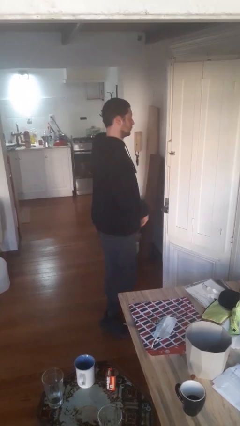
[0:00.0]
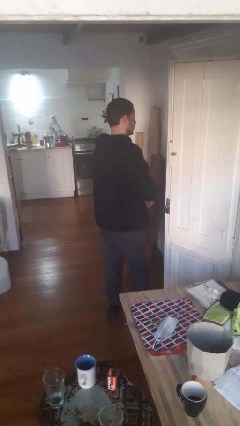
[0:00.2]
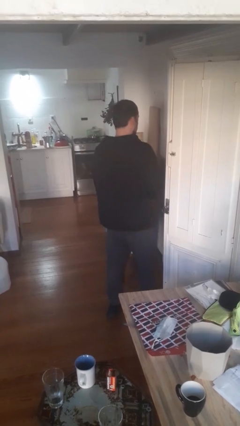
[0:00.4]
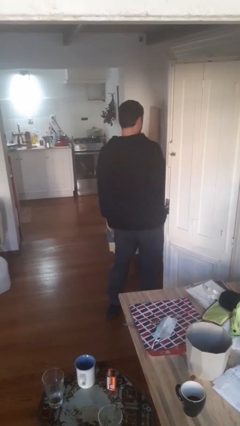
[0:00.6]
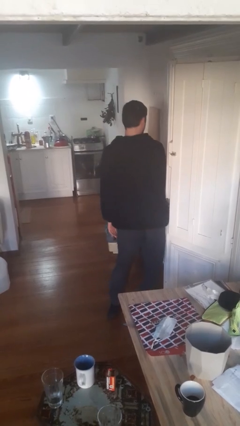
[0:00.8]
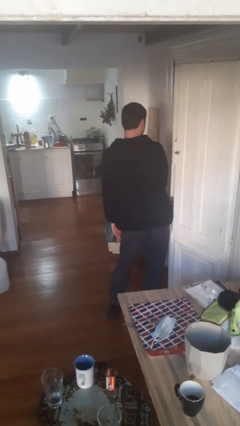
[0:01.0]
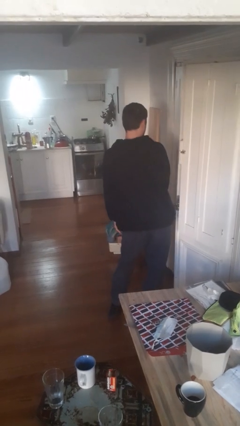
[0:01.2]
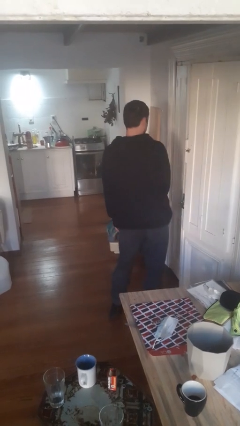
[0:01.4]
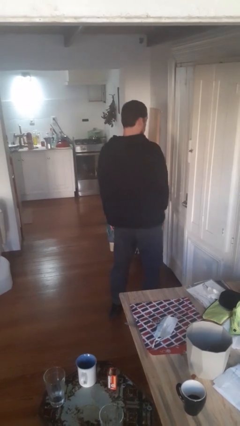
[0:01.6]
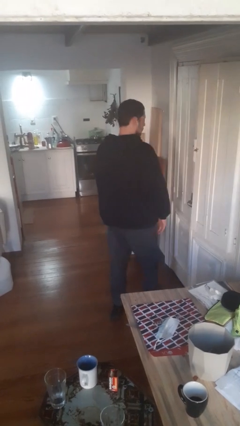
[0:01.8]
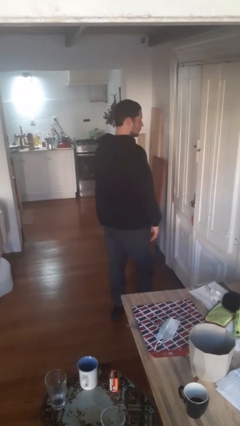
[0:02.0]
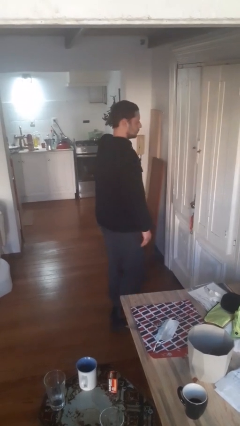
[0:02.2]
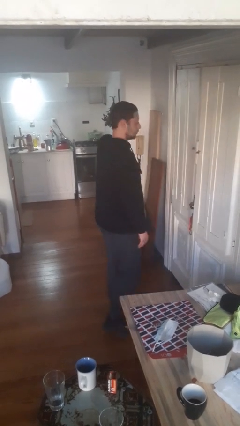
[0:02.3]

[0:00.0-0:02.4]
person closes door with hip

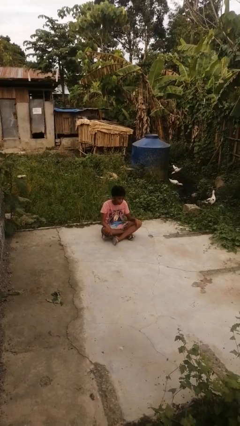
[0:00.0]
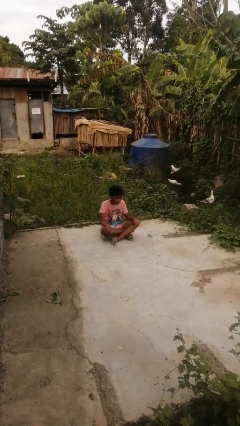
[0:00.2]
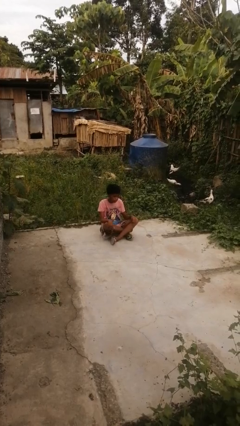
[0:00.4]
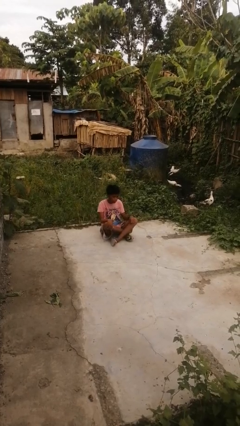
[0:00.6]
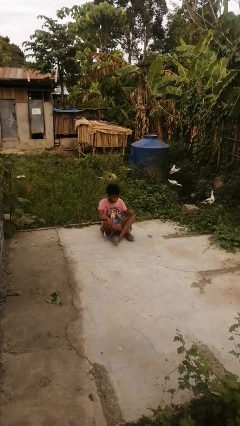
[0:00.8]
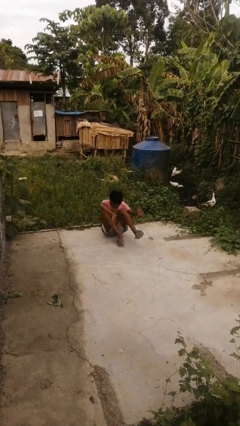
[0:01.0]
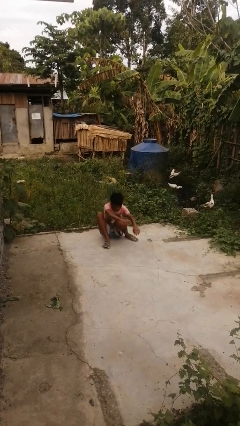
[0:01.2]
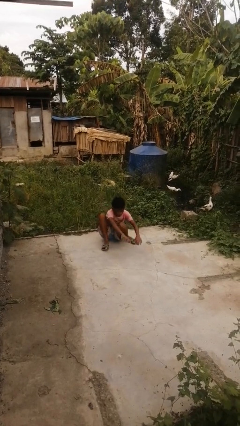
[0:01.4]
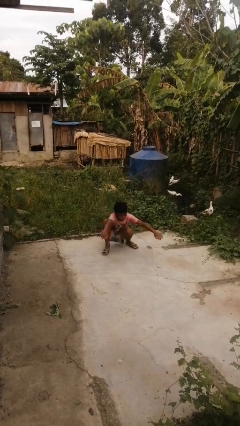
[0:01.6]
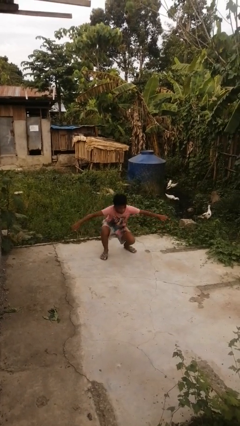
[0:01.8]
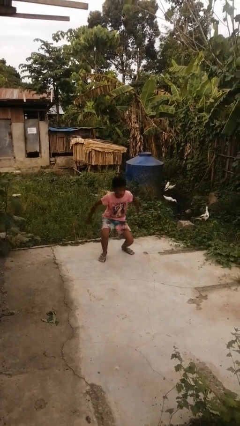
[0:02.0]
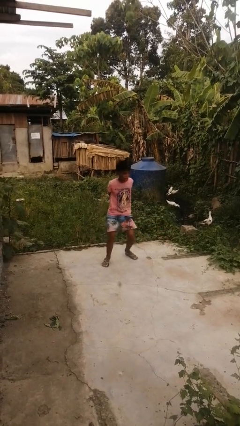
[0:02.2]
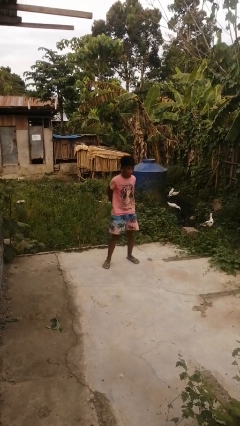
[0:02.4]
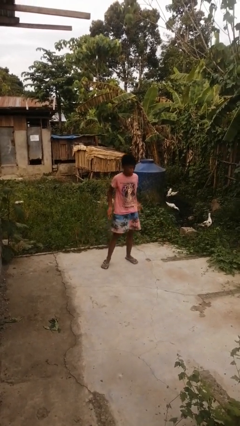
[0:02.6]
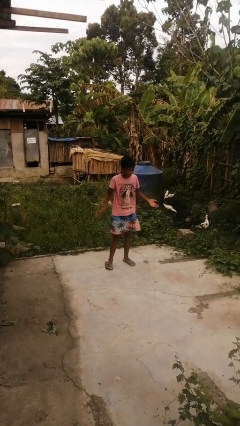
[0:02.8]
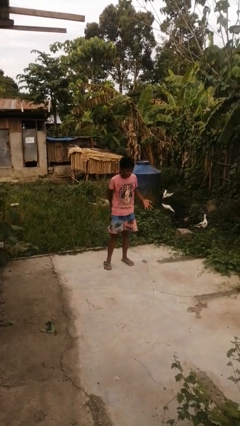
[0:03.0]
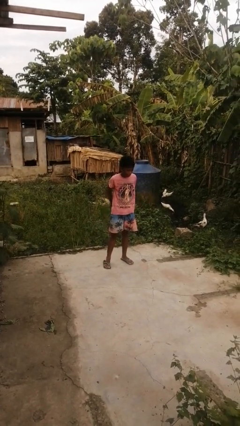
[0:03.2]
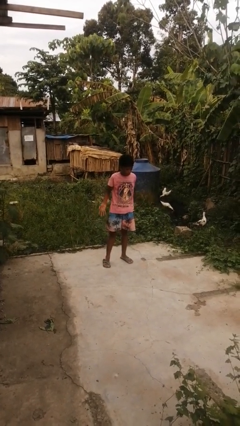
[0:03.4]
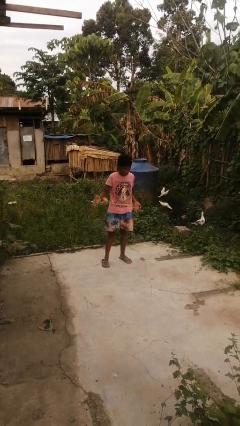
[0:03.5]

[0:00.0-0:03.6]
person stands up from floor

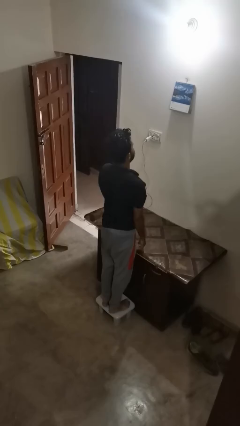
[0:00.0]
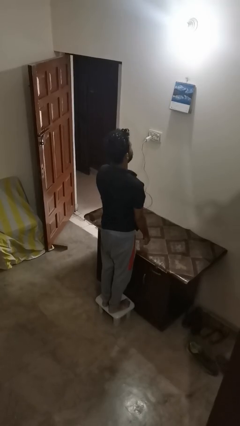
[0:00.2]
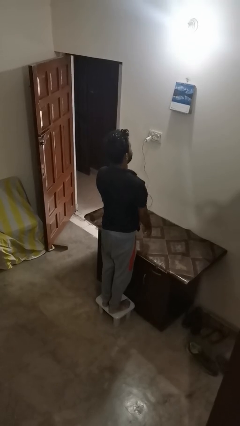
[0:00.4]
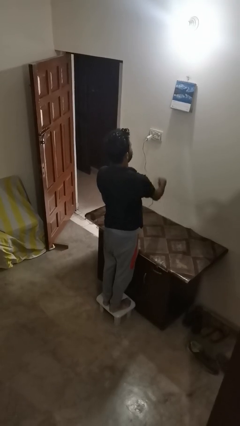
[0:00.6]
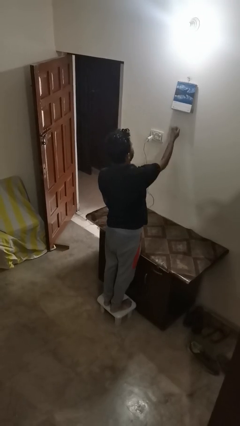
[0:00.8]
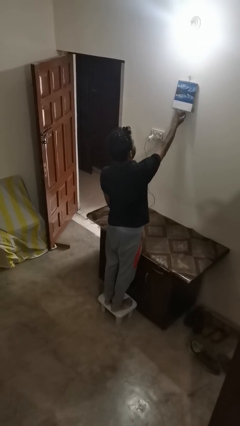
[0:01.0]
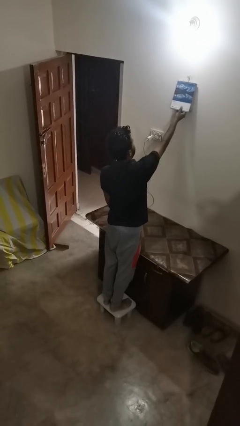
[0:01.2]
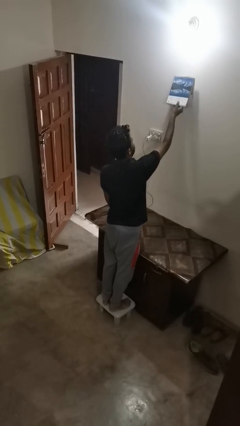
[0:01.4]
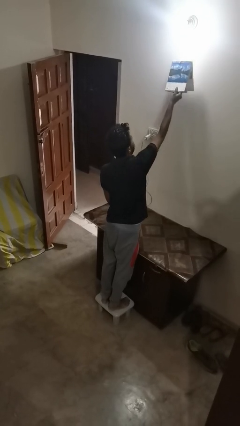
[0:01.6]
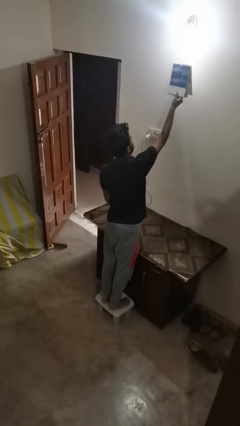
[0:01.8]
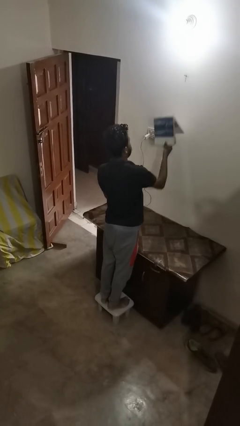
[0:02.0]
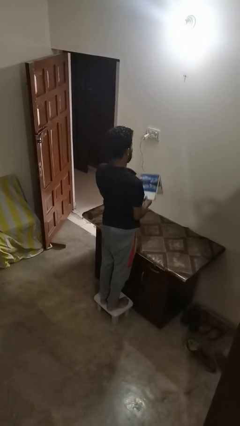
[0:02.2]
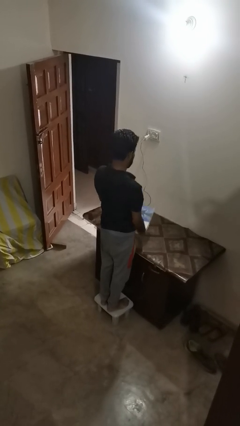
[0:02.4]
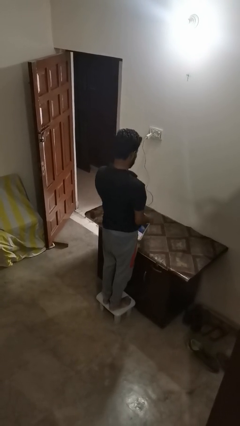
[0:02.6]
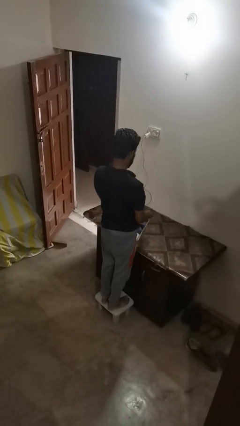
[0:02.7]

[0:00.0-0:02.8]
person takes down picture frame

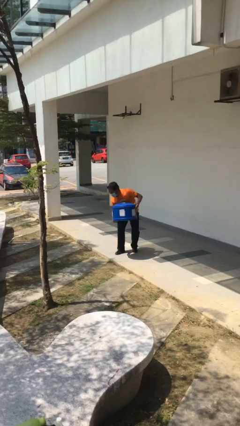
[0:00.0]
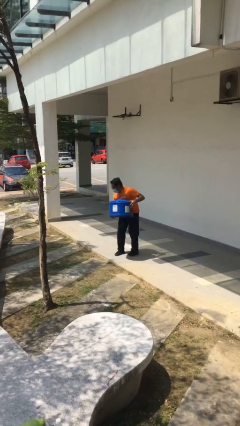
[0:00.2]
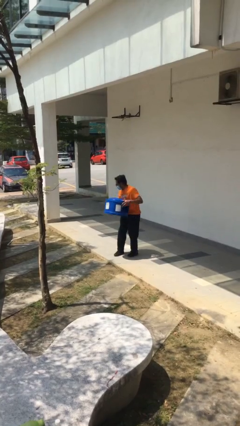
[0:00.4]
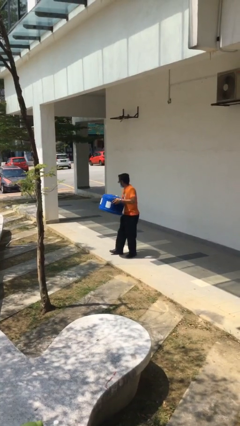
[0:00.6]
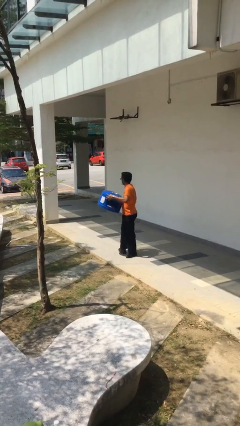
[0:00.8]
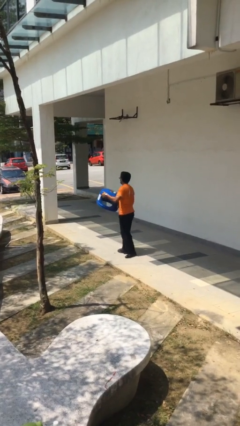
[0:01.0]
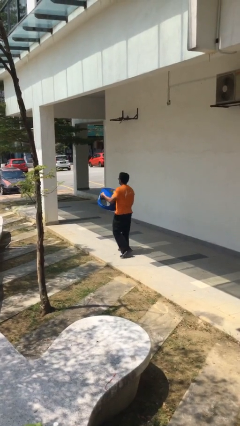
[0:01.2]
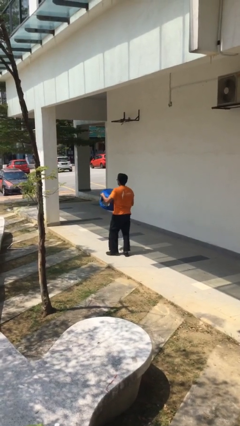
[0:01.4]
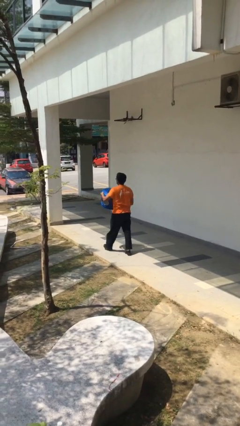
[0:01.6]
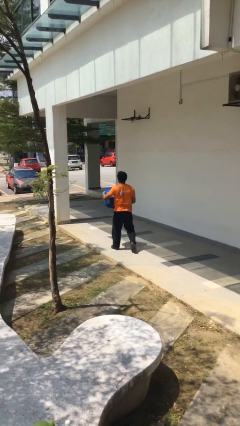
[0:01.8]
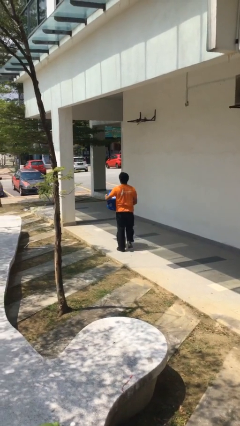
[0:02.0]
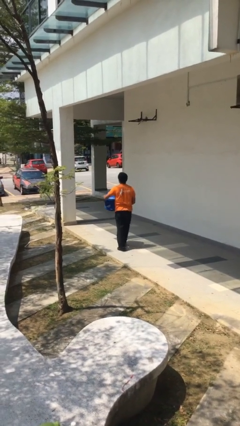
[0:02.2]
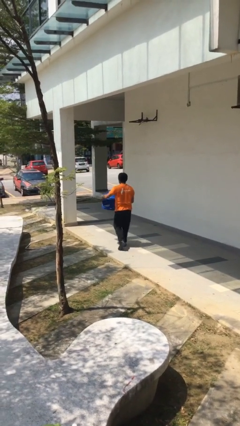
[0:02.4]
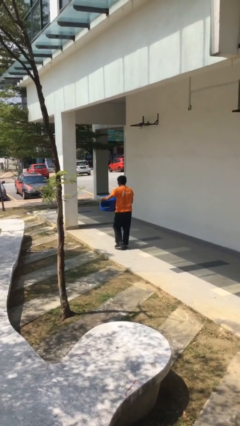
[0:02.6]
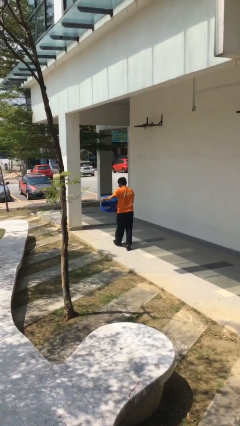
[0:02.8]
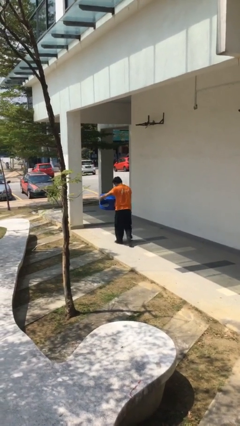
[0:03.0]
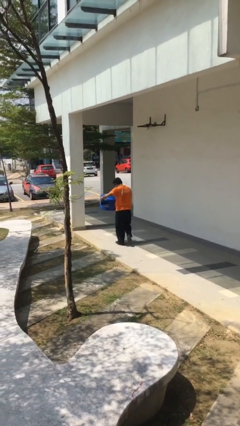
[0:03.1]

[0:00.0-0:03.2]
person carries heavy object

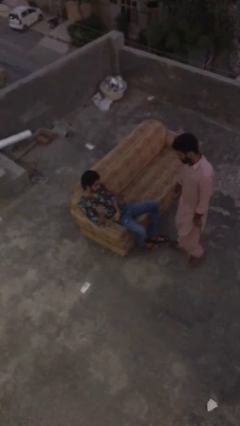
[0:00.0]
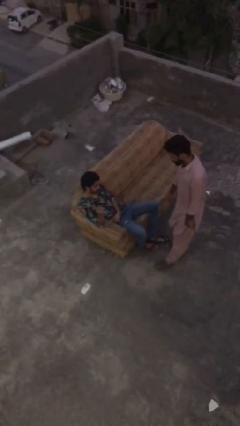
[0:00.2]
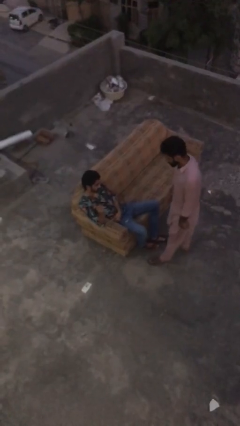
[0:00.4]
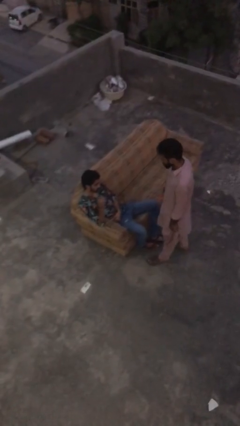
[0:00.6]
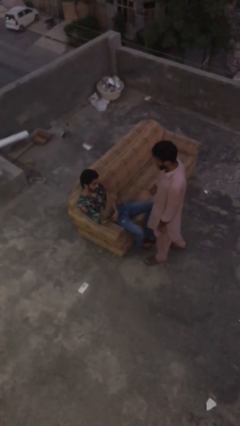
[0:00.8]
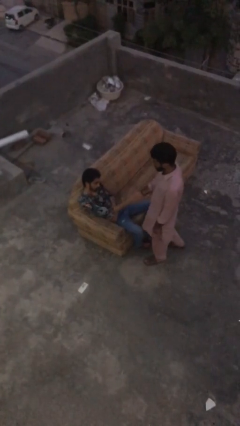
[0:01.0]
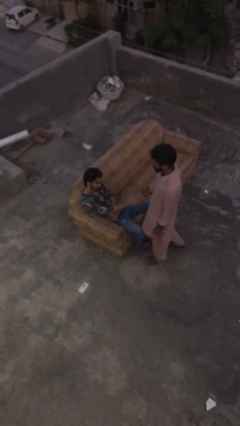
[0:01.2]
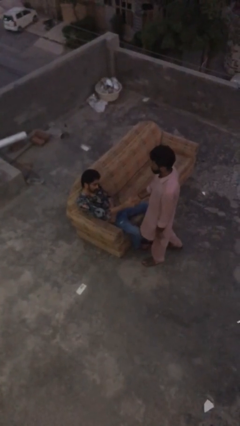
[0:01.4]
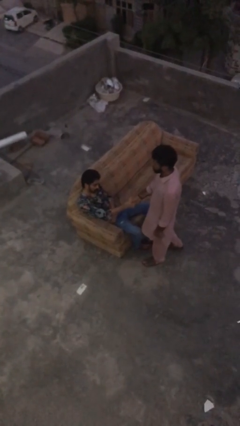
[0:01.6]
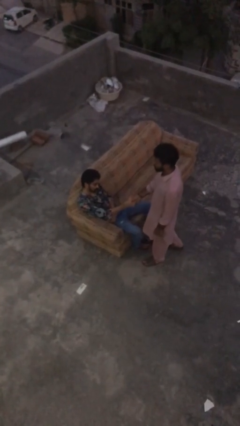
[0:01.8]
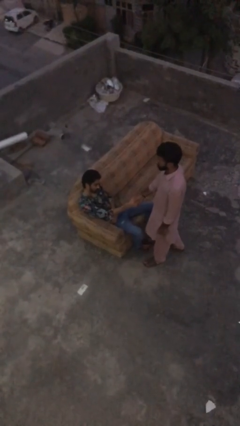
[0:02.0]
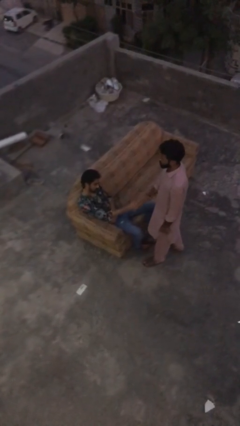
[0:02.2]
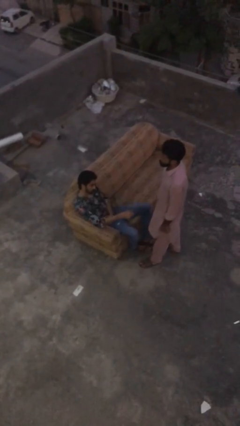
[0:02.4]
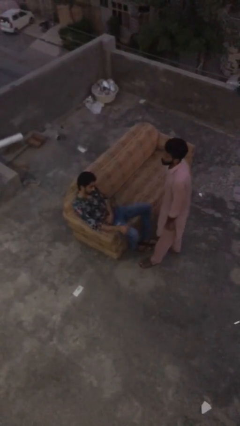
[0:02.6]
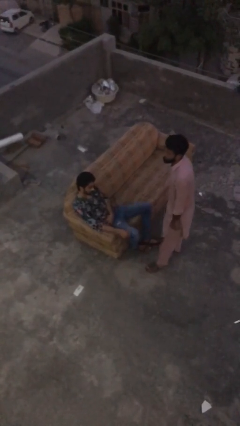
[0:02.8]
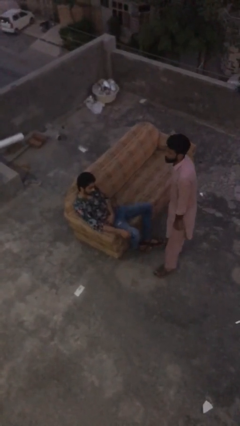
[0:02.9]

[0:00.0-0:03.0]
person shakes hand

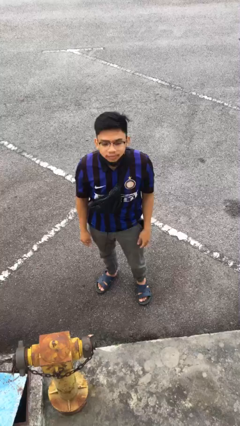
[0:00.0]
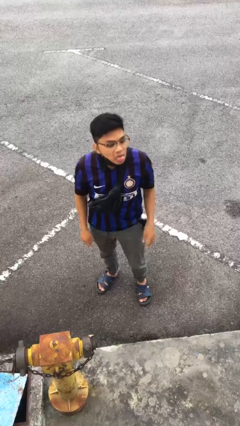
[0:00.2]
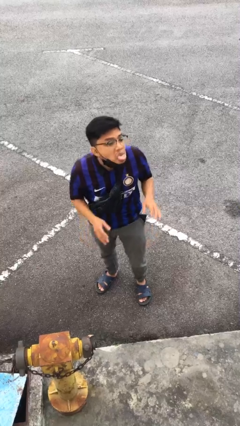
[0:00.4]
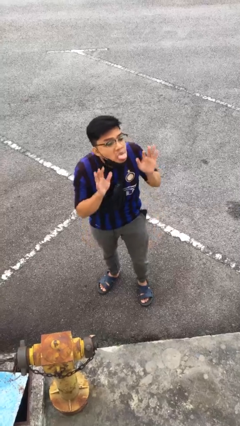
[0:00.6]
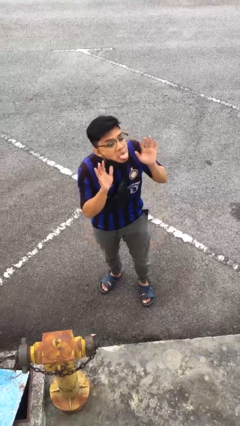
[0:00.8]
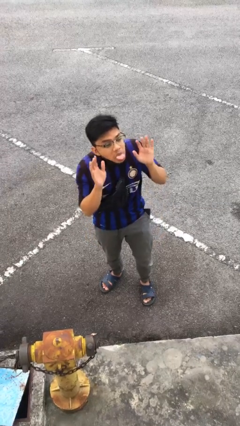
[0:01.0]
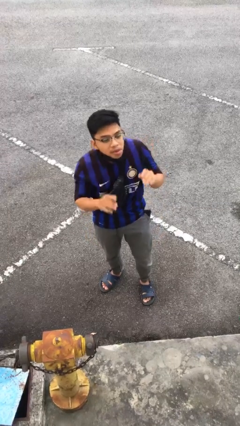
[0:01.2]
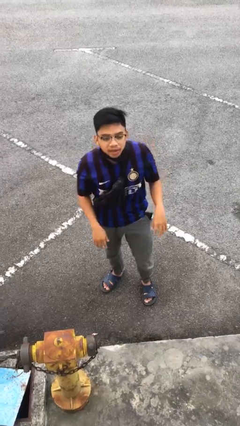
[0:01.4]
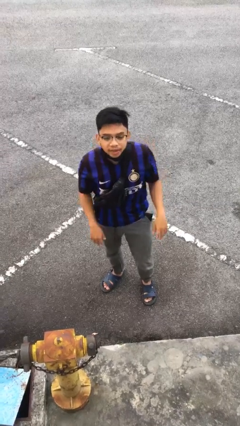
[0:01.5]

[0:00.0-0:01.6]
person sticks out tongue

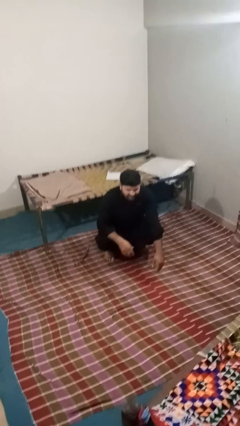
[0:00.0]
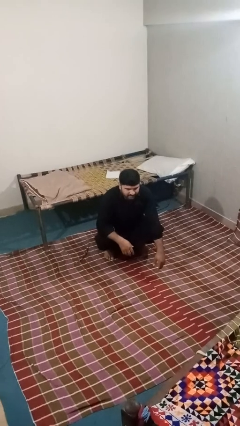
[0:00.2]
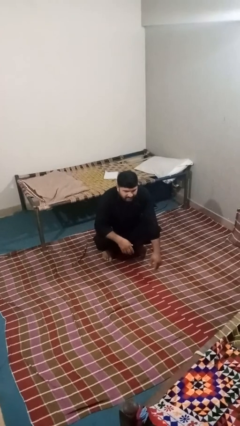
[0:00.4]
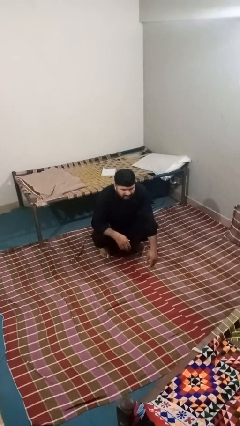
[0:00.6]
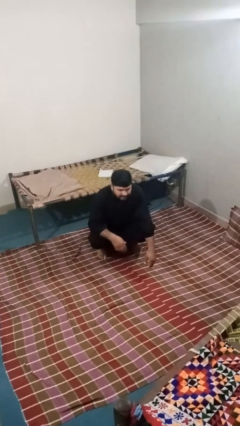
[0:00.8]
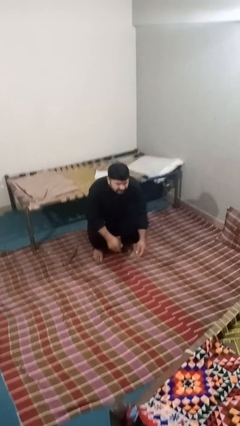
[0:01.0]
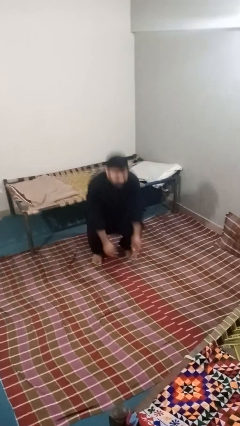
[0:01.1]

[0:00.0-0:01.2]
person squats
